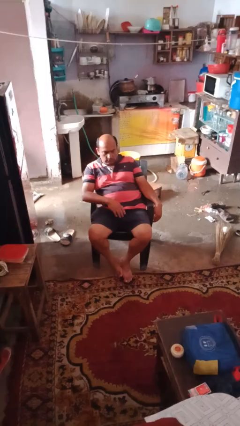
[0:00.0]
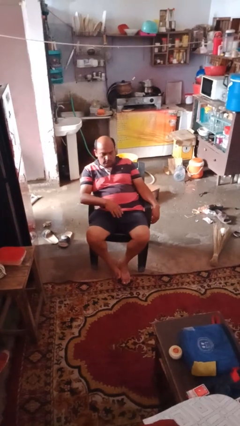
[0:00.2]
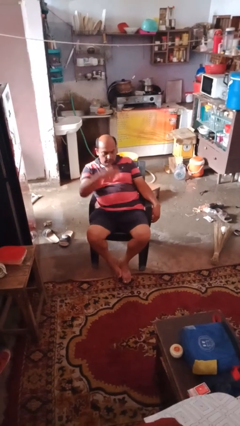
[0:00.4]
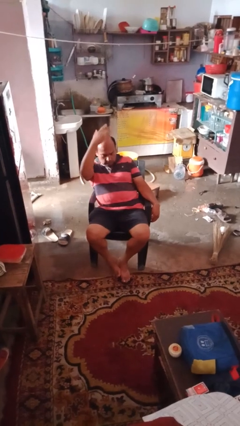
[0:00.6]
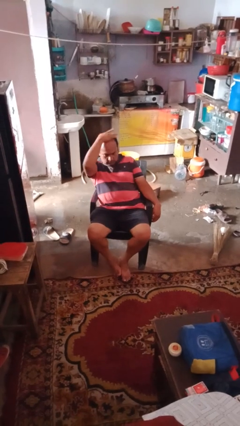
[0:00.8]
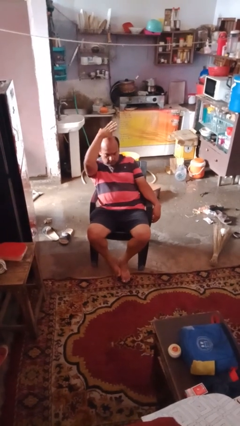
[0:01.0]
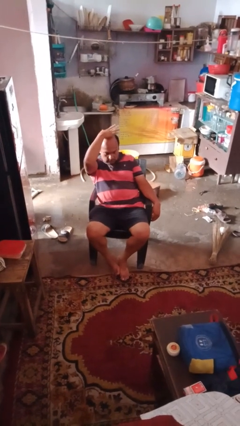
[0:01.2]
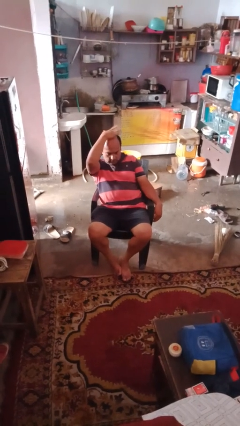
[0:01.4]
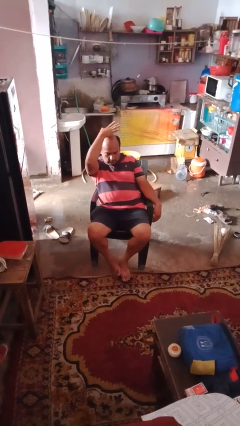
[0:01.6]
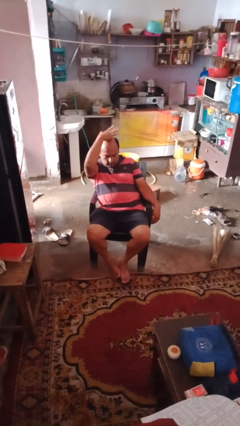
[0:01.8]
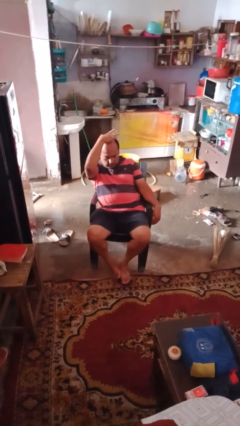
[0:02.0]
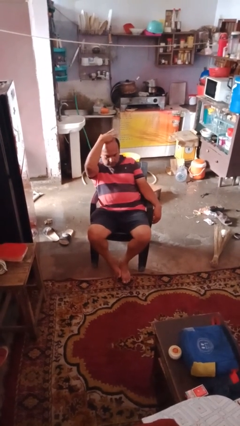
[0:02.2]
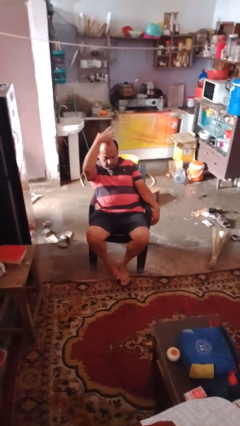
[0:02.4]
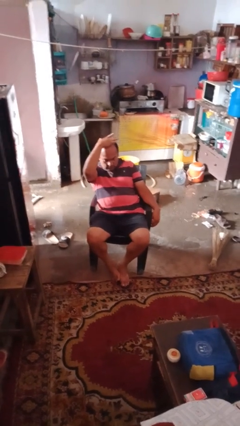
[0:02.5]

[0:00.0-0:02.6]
person pats head

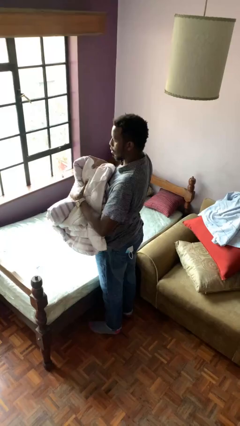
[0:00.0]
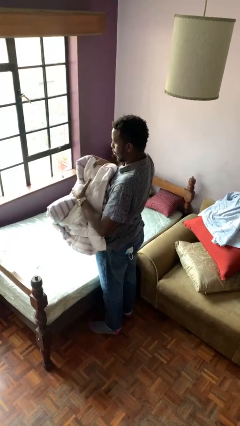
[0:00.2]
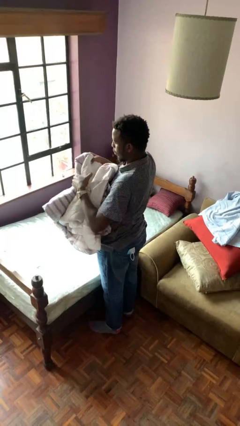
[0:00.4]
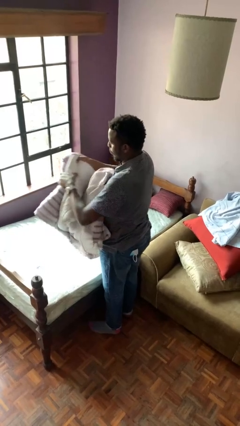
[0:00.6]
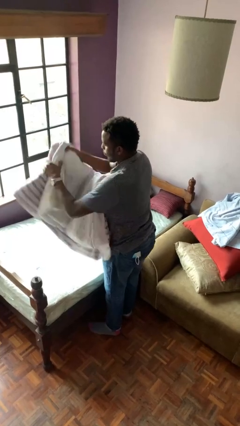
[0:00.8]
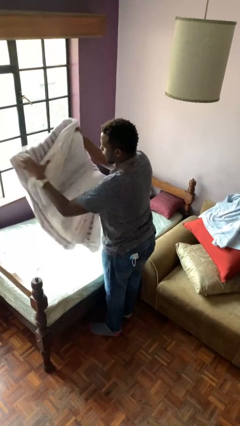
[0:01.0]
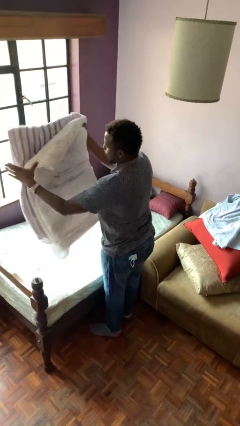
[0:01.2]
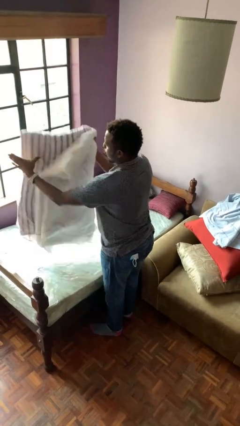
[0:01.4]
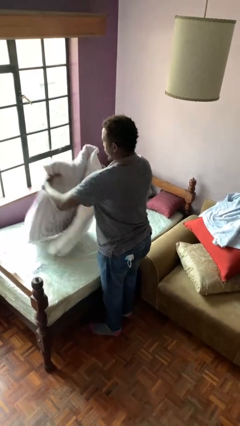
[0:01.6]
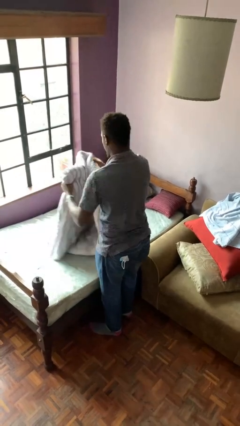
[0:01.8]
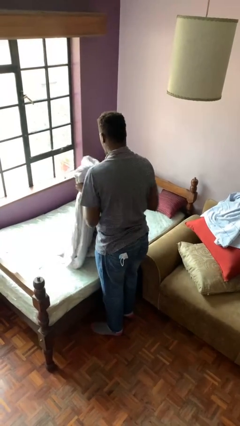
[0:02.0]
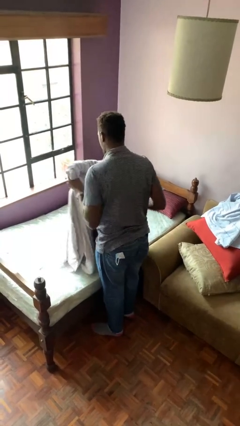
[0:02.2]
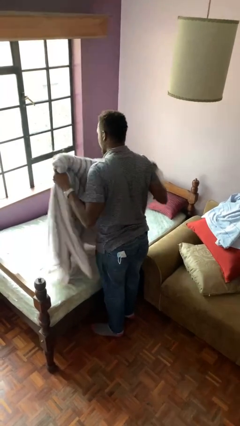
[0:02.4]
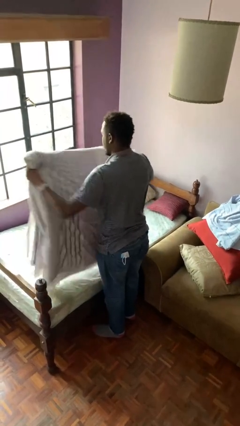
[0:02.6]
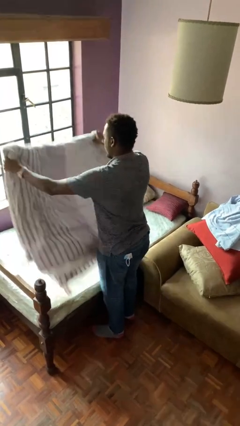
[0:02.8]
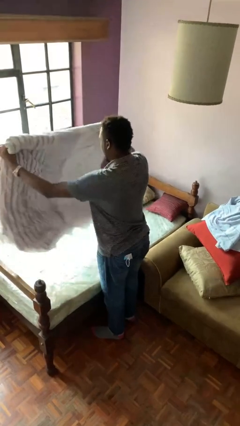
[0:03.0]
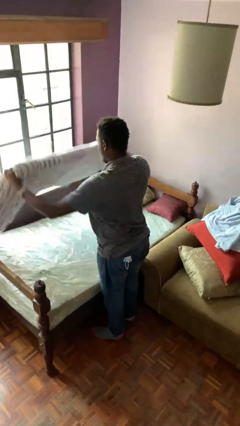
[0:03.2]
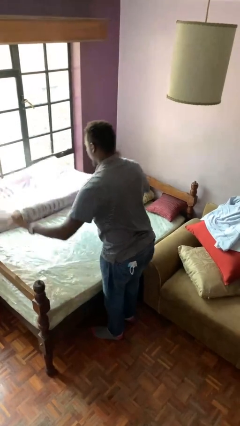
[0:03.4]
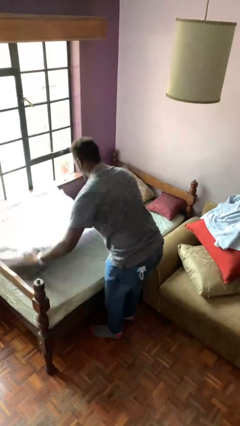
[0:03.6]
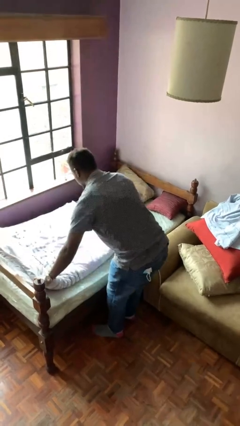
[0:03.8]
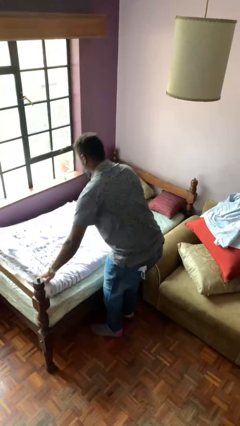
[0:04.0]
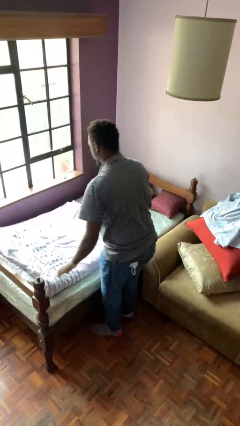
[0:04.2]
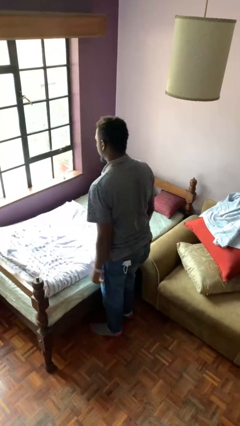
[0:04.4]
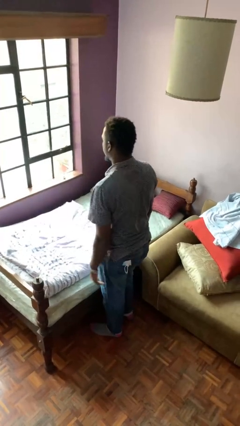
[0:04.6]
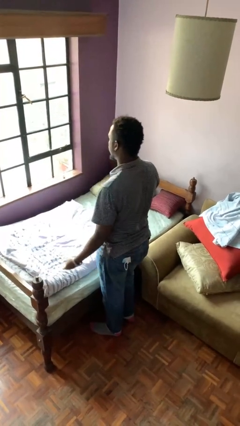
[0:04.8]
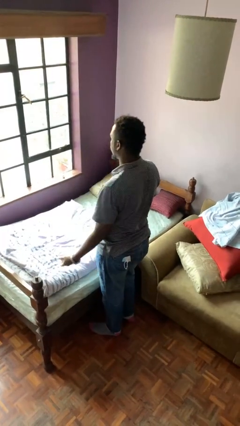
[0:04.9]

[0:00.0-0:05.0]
person unfolds blanket

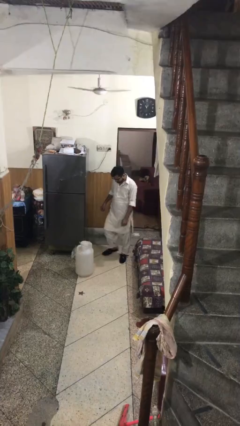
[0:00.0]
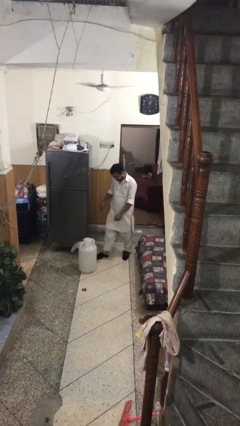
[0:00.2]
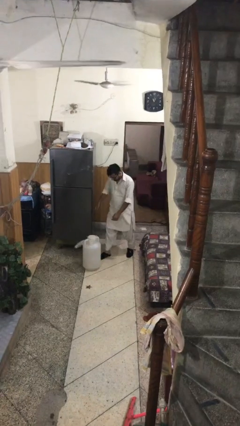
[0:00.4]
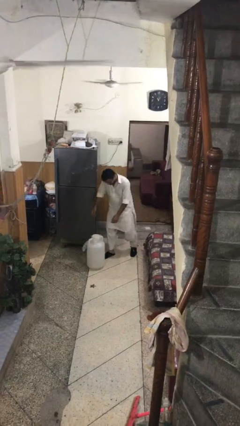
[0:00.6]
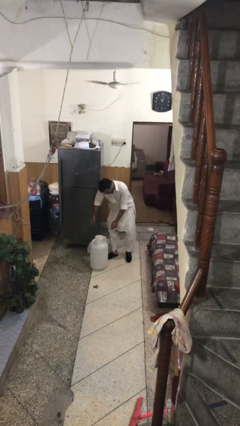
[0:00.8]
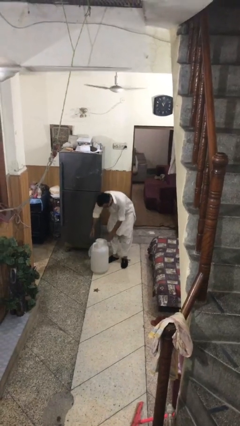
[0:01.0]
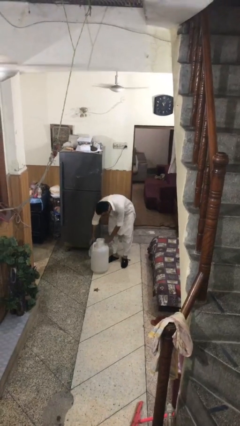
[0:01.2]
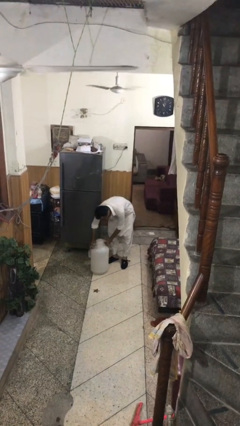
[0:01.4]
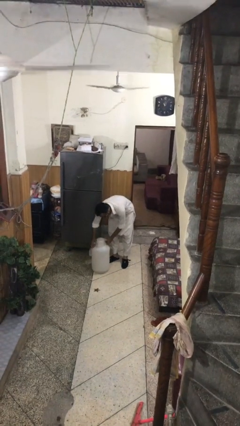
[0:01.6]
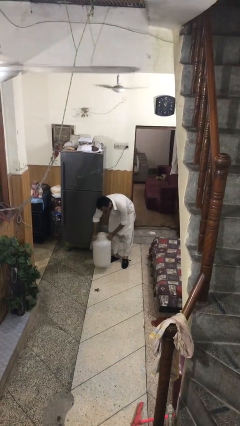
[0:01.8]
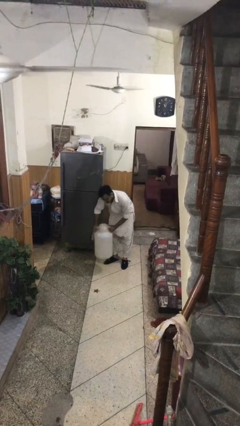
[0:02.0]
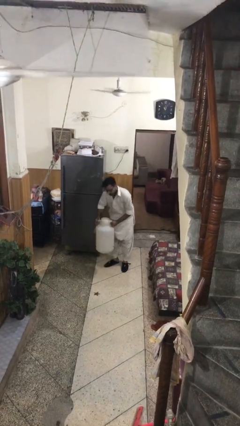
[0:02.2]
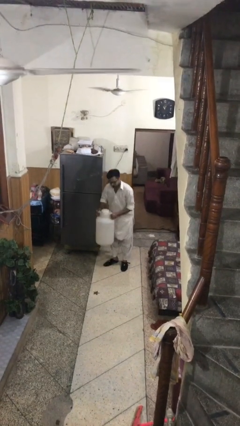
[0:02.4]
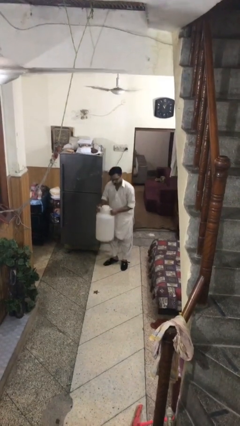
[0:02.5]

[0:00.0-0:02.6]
person picks up object from floor

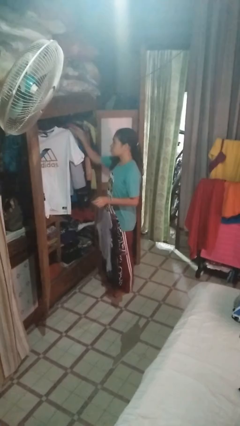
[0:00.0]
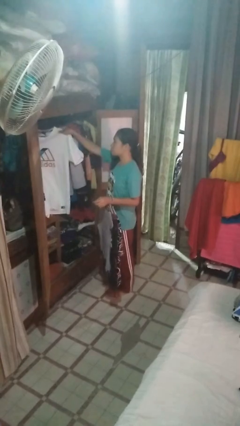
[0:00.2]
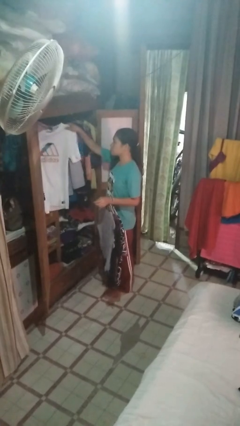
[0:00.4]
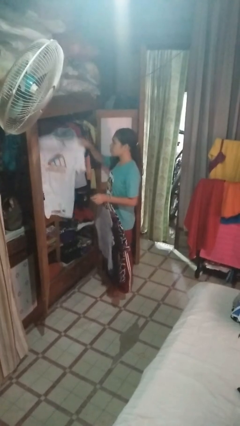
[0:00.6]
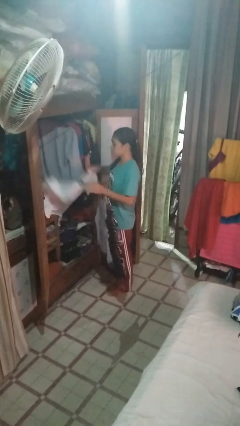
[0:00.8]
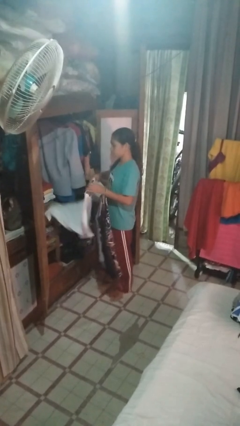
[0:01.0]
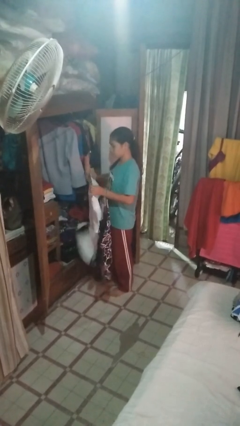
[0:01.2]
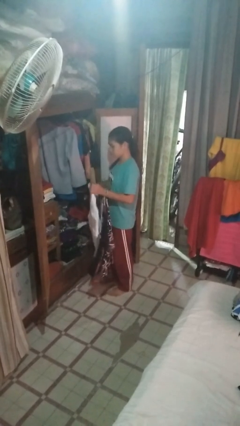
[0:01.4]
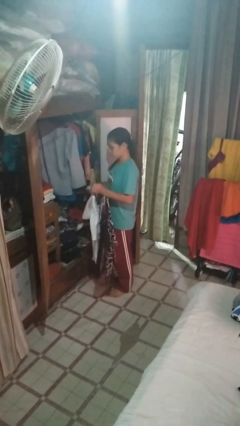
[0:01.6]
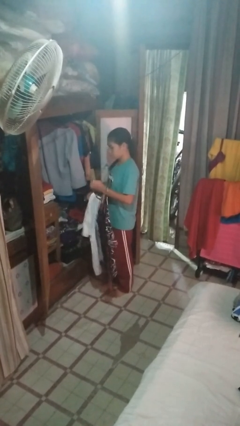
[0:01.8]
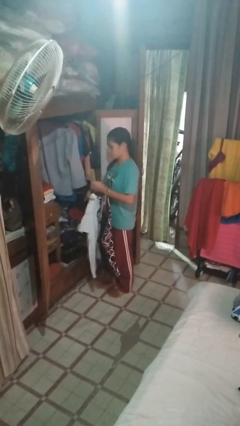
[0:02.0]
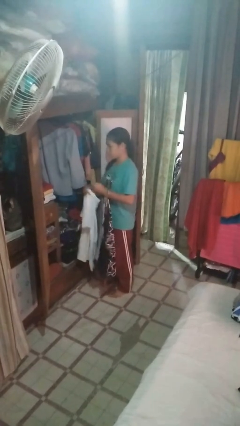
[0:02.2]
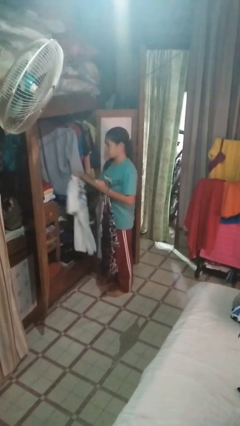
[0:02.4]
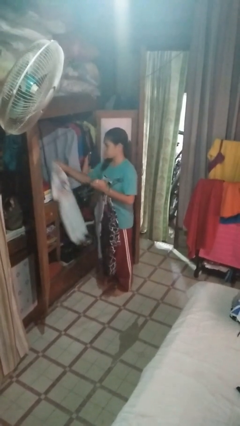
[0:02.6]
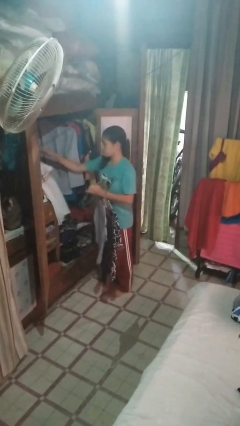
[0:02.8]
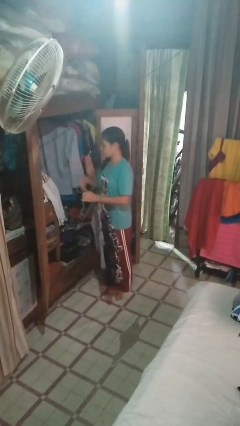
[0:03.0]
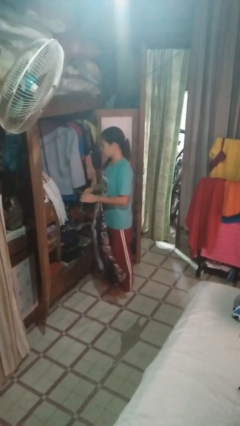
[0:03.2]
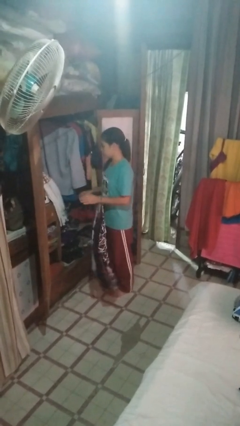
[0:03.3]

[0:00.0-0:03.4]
person takes clothes from closet

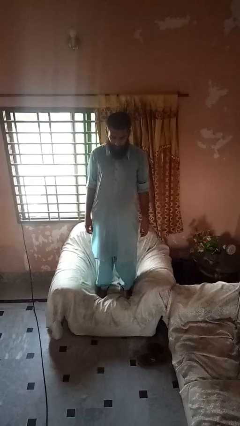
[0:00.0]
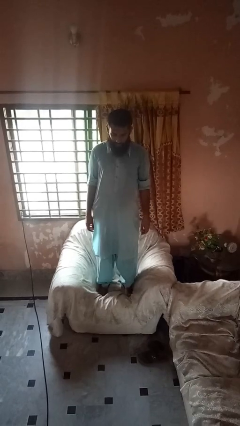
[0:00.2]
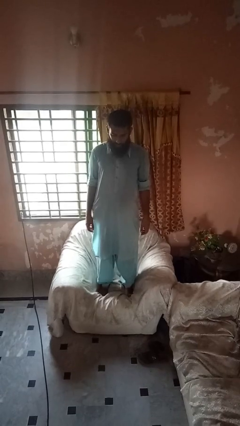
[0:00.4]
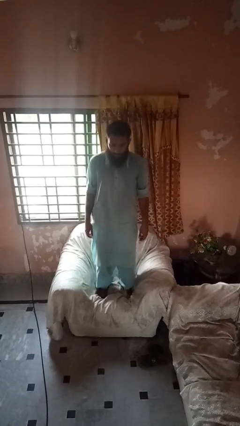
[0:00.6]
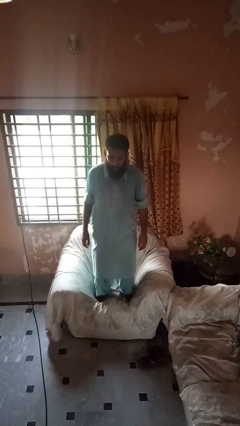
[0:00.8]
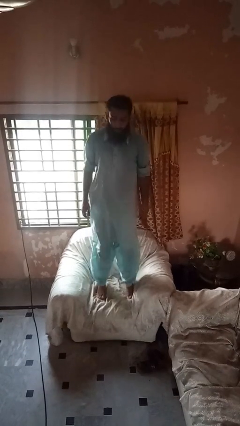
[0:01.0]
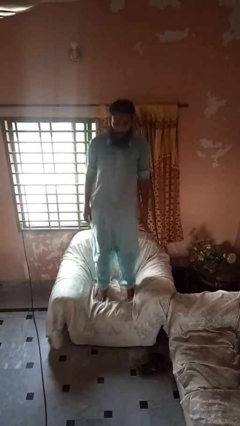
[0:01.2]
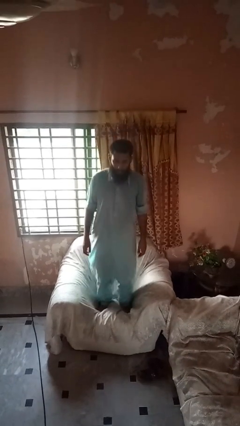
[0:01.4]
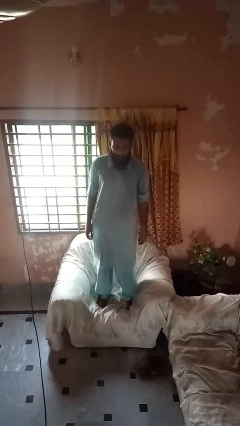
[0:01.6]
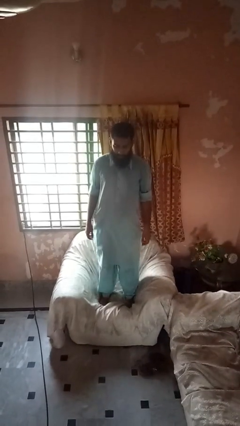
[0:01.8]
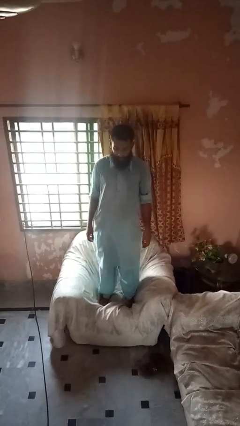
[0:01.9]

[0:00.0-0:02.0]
person jumps on couch

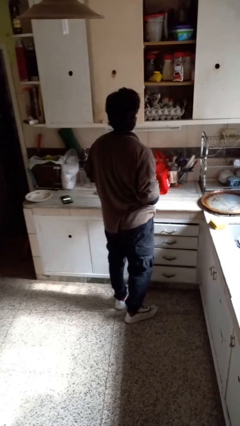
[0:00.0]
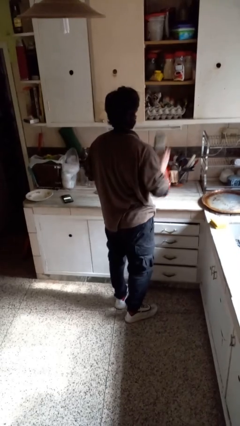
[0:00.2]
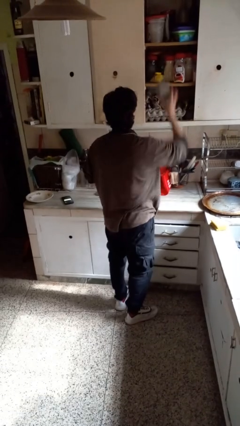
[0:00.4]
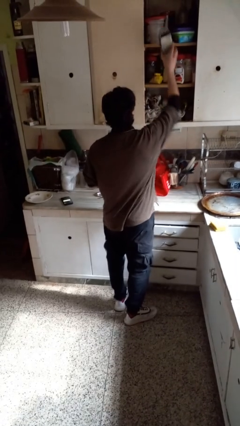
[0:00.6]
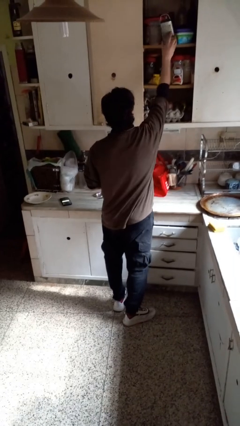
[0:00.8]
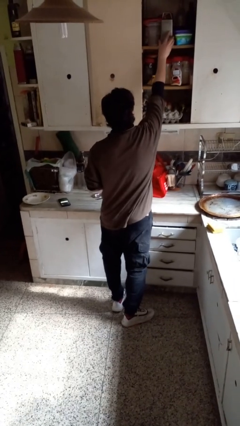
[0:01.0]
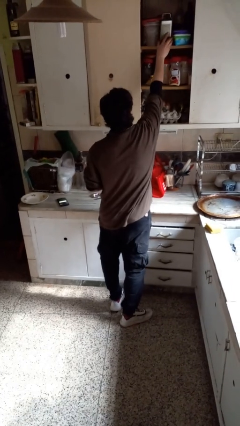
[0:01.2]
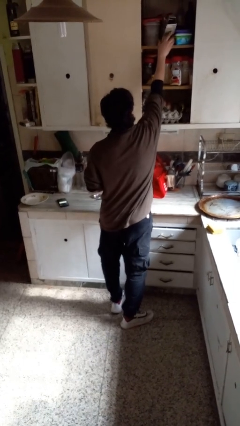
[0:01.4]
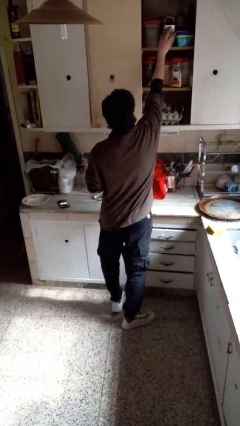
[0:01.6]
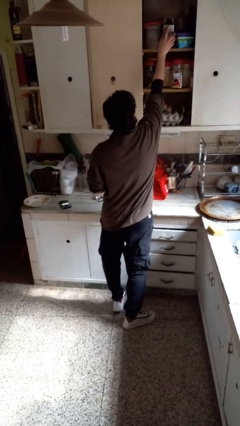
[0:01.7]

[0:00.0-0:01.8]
person picks up object from cabinet
